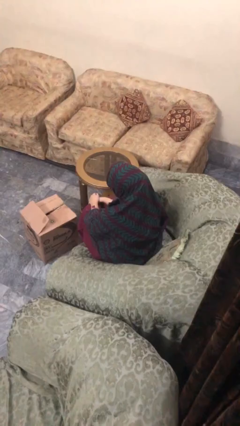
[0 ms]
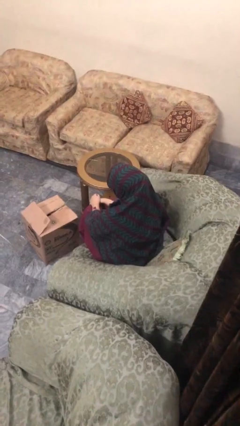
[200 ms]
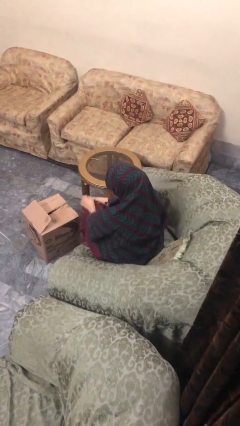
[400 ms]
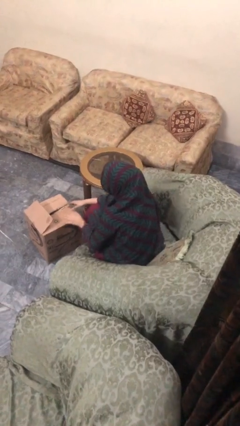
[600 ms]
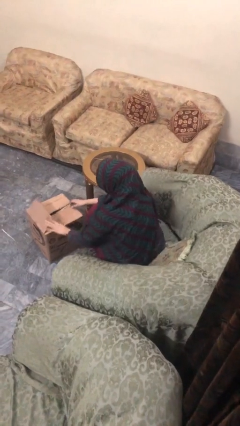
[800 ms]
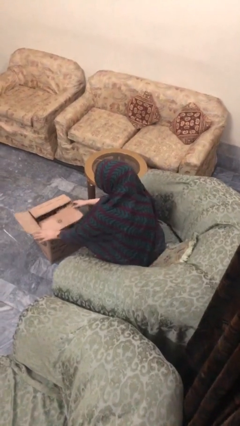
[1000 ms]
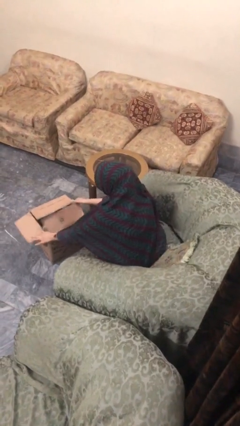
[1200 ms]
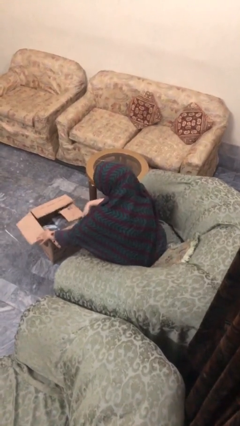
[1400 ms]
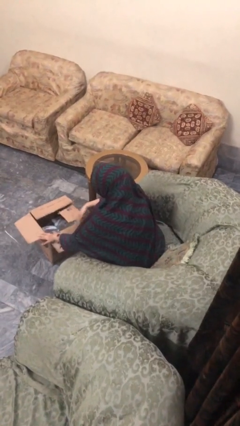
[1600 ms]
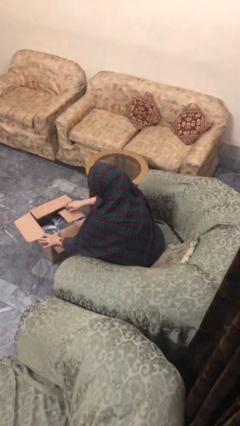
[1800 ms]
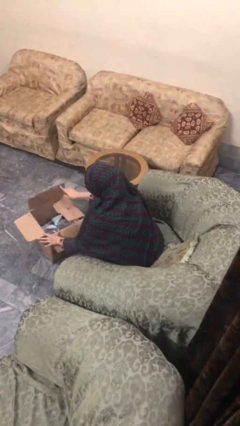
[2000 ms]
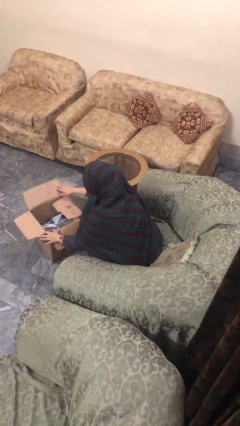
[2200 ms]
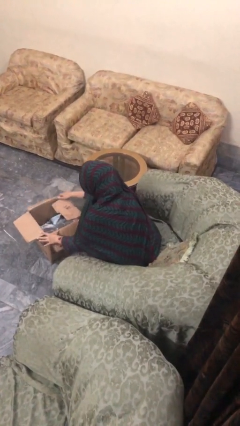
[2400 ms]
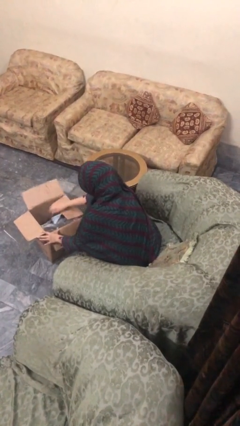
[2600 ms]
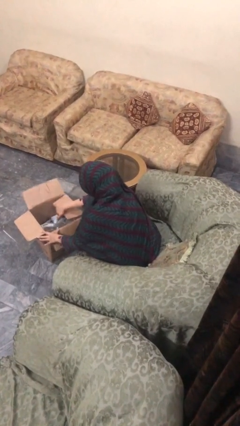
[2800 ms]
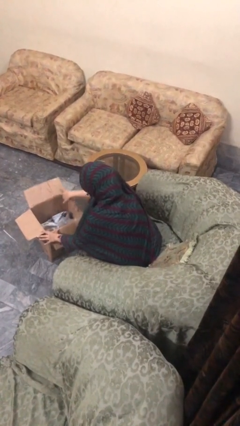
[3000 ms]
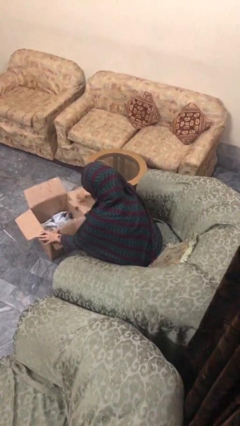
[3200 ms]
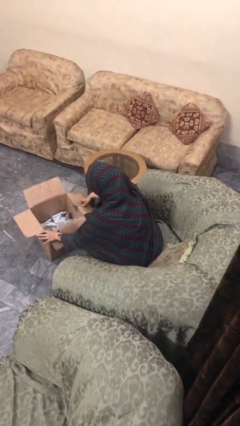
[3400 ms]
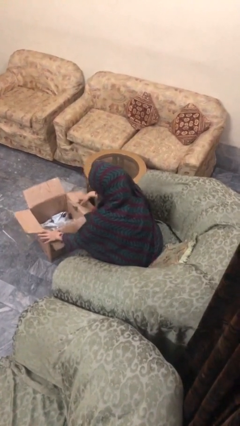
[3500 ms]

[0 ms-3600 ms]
person opens box

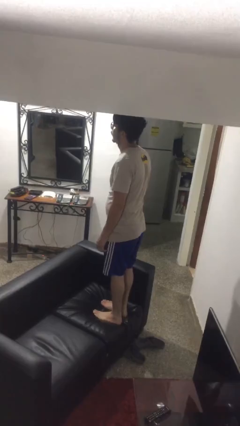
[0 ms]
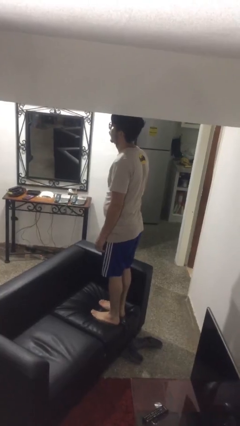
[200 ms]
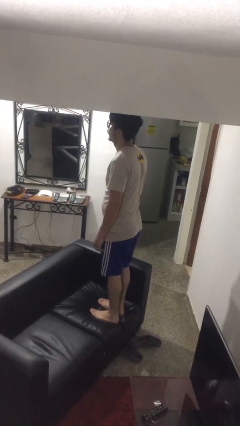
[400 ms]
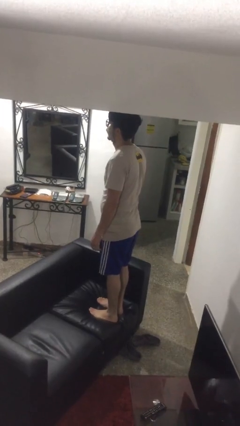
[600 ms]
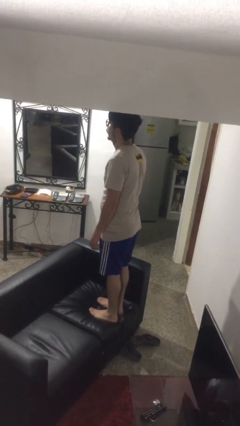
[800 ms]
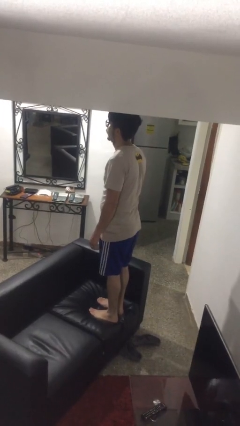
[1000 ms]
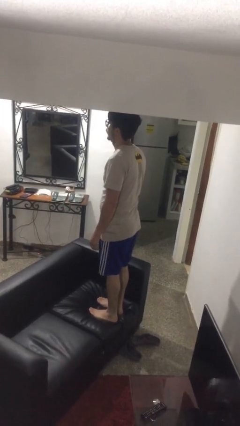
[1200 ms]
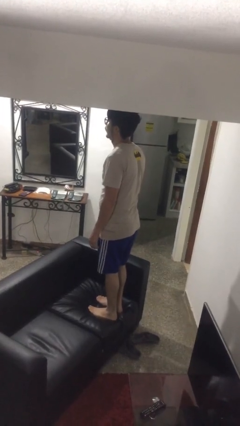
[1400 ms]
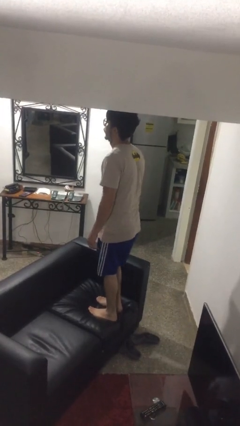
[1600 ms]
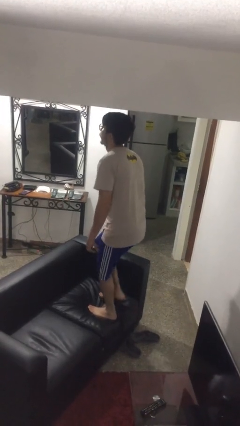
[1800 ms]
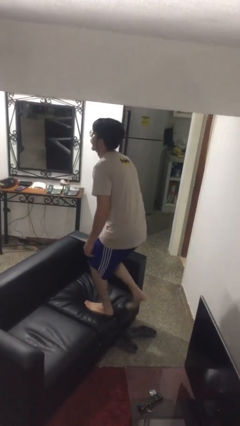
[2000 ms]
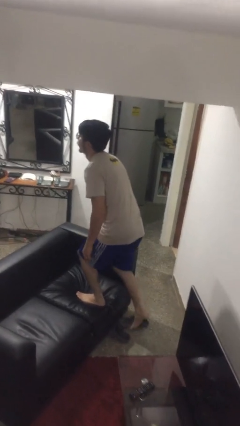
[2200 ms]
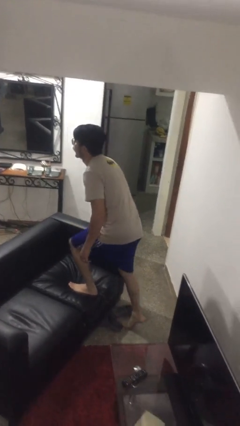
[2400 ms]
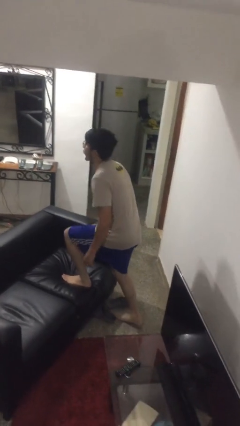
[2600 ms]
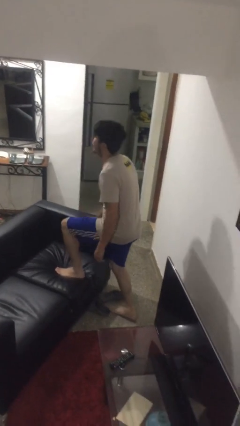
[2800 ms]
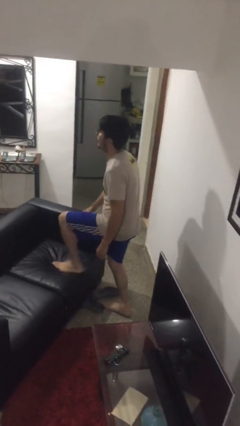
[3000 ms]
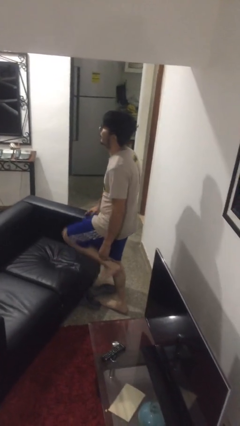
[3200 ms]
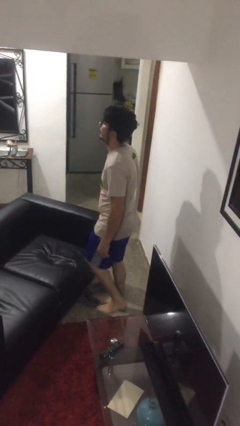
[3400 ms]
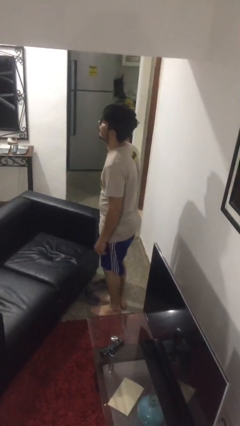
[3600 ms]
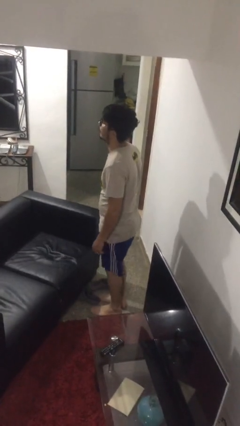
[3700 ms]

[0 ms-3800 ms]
person climbs off couch

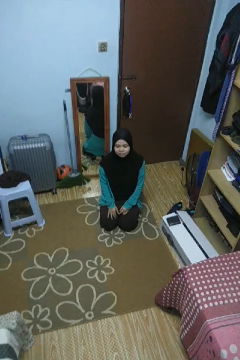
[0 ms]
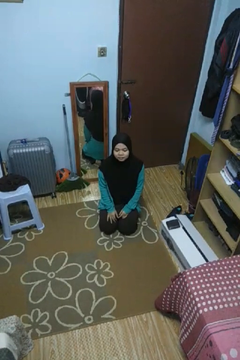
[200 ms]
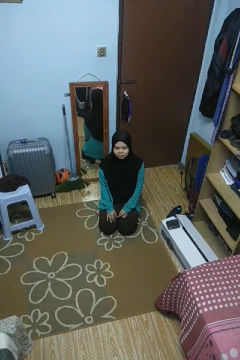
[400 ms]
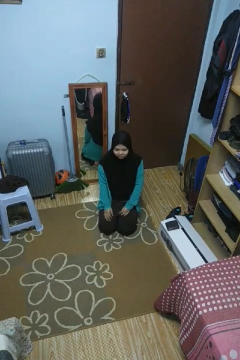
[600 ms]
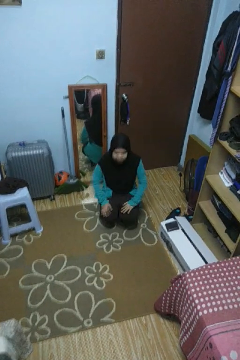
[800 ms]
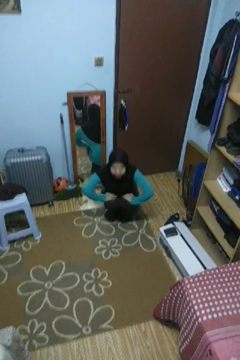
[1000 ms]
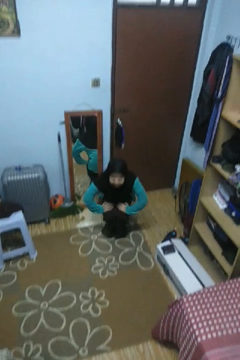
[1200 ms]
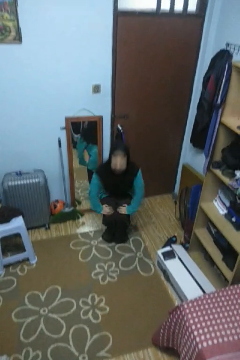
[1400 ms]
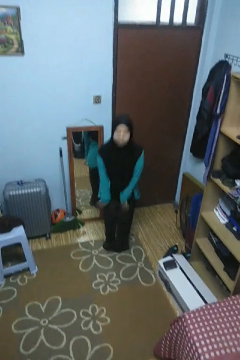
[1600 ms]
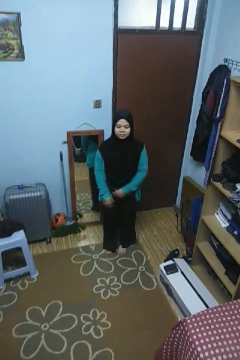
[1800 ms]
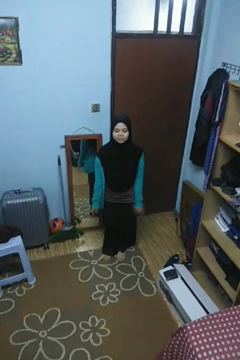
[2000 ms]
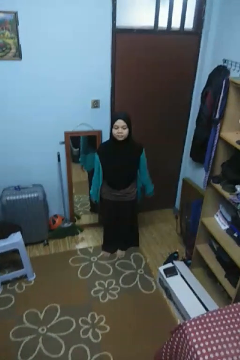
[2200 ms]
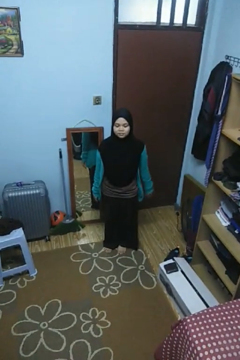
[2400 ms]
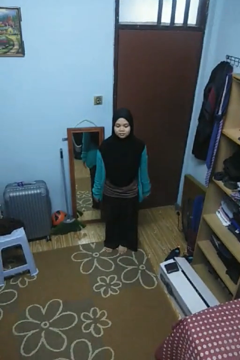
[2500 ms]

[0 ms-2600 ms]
person stands up from floor

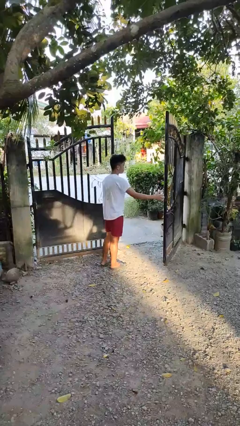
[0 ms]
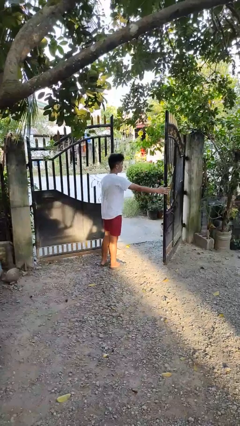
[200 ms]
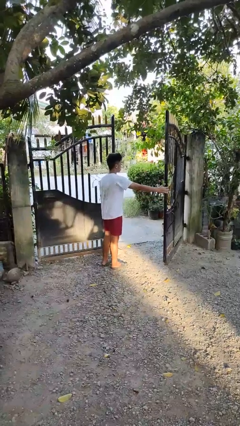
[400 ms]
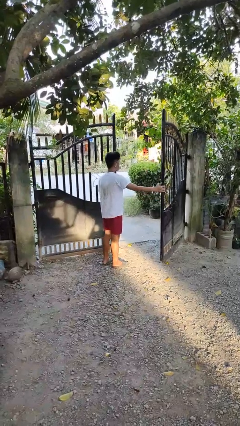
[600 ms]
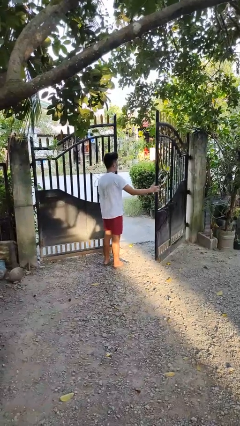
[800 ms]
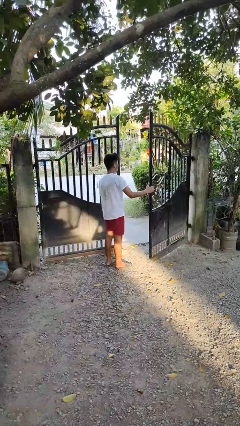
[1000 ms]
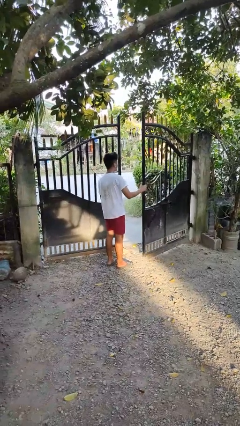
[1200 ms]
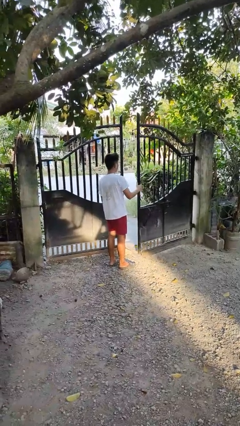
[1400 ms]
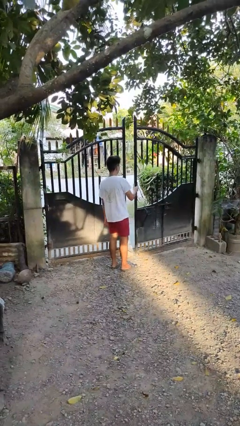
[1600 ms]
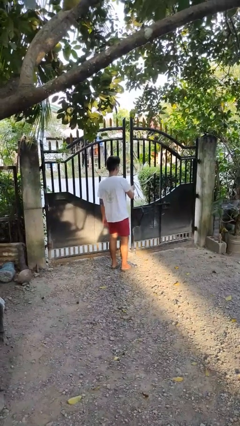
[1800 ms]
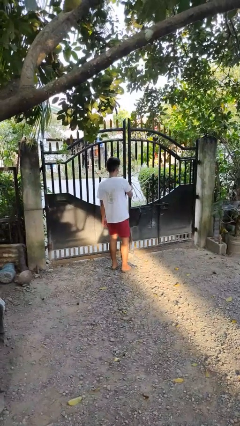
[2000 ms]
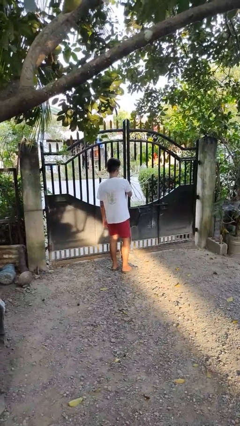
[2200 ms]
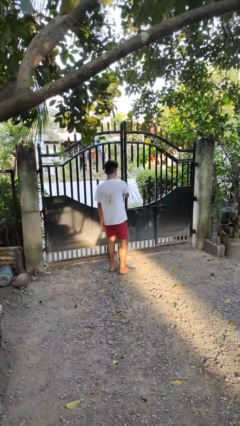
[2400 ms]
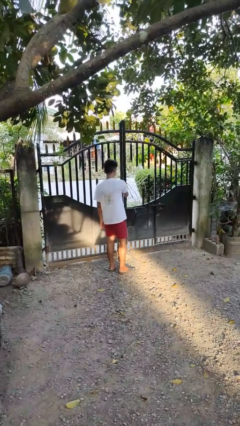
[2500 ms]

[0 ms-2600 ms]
person closes gate

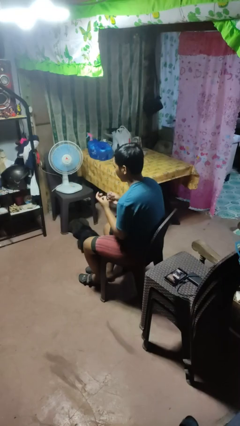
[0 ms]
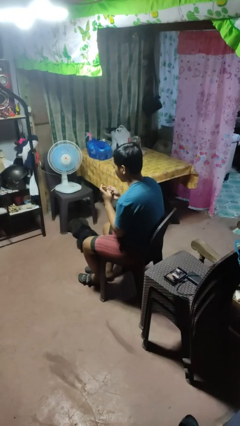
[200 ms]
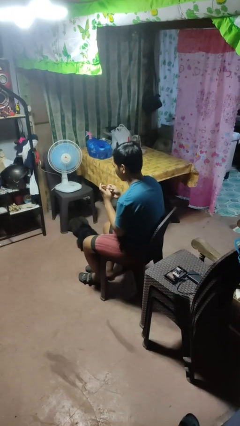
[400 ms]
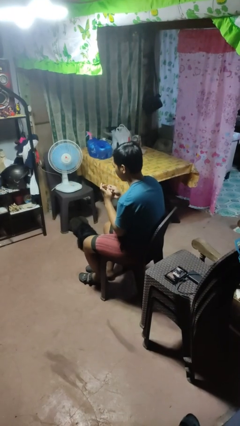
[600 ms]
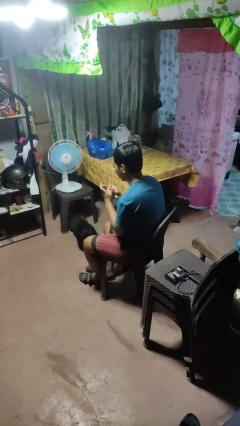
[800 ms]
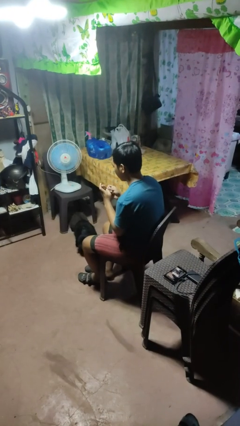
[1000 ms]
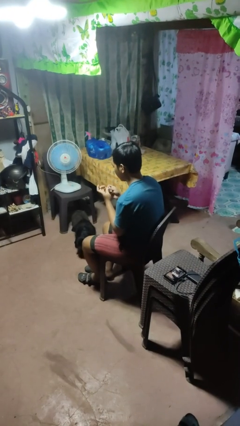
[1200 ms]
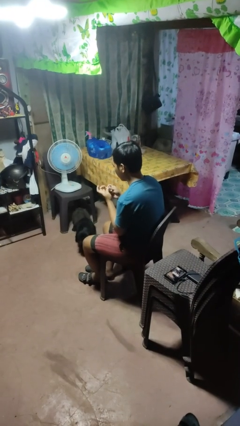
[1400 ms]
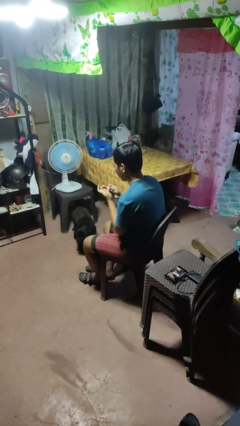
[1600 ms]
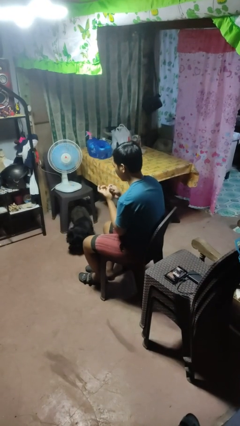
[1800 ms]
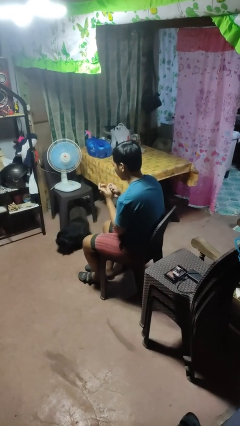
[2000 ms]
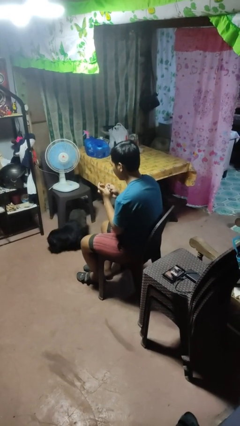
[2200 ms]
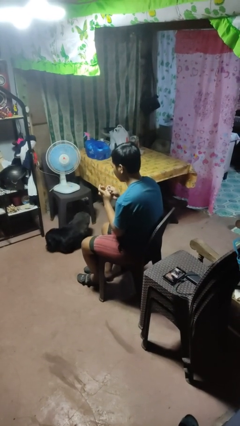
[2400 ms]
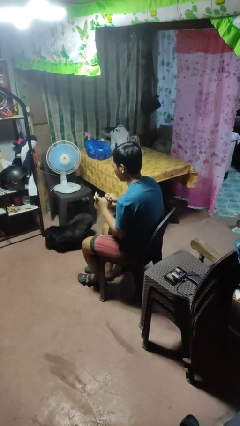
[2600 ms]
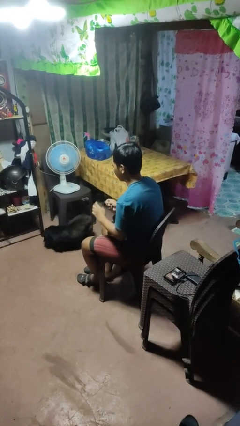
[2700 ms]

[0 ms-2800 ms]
person files fingernails

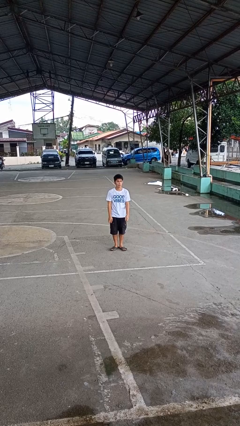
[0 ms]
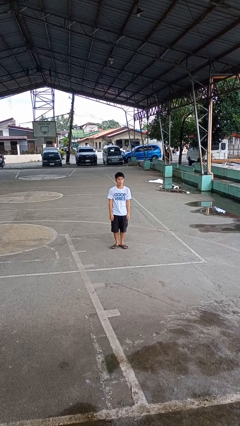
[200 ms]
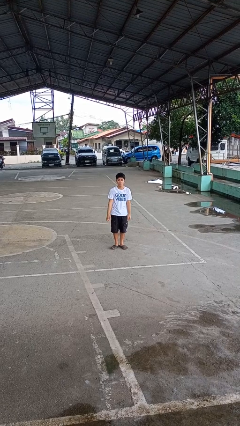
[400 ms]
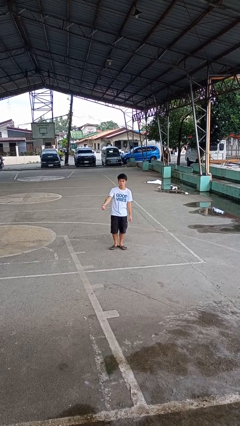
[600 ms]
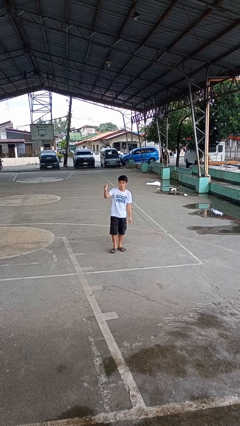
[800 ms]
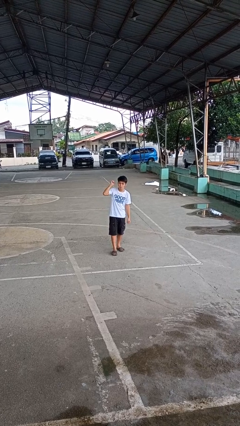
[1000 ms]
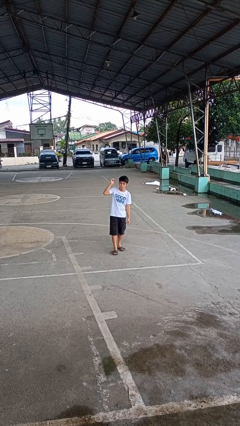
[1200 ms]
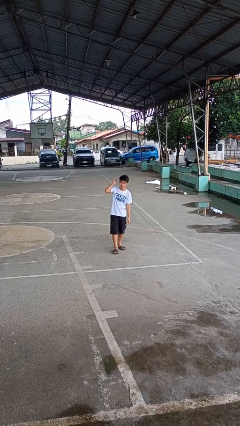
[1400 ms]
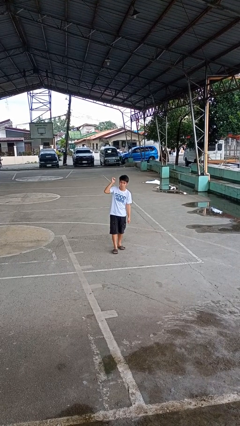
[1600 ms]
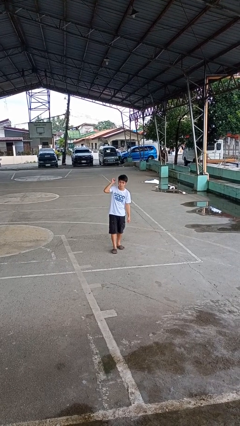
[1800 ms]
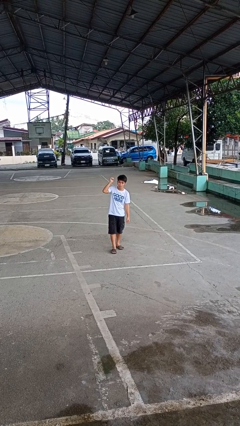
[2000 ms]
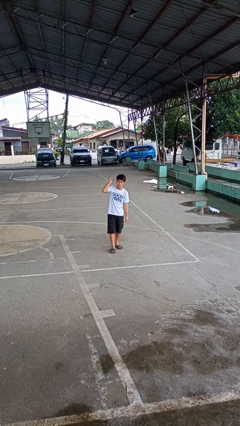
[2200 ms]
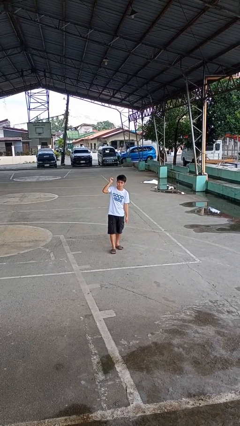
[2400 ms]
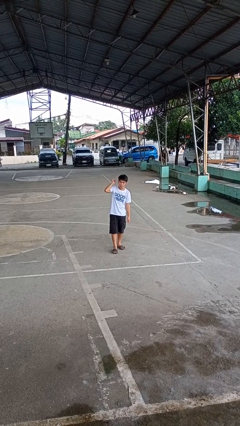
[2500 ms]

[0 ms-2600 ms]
person gestures behind me
